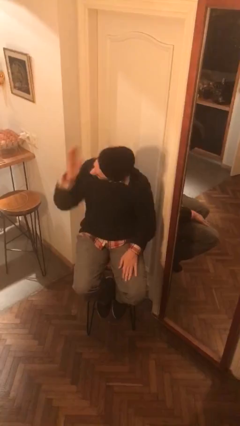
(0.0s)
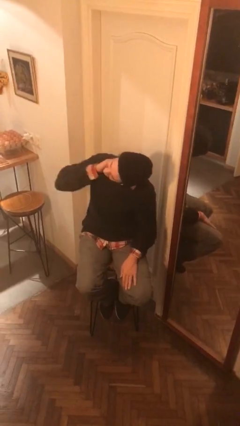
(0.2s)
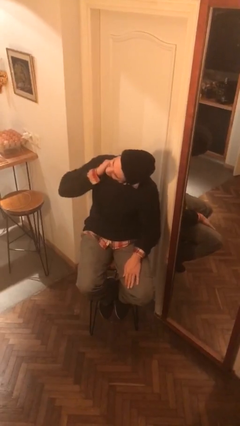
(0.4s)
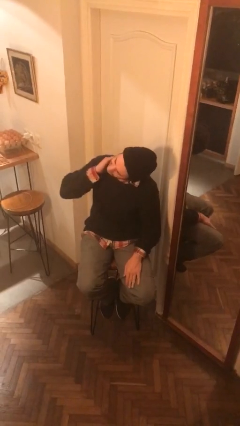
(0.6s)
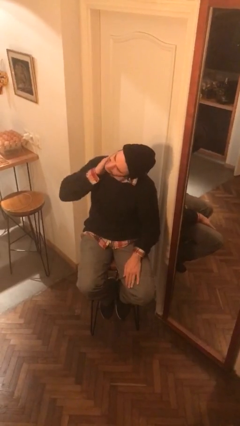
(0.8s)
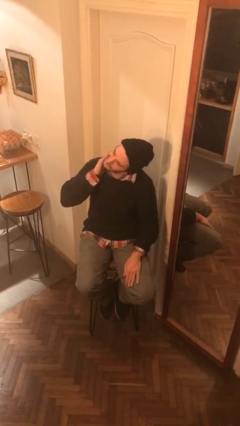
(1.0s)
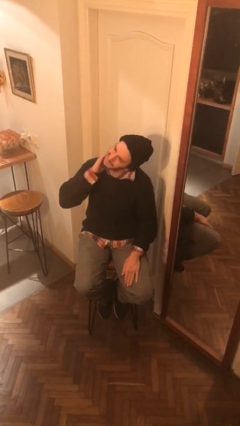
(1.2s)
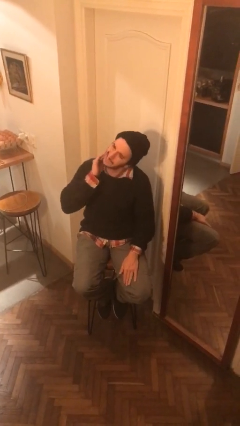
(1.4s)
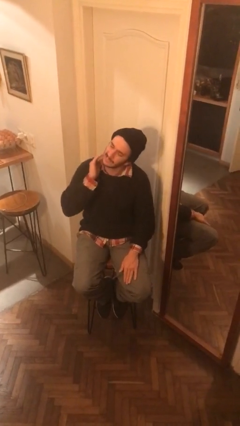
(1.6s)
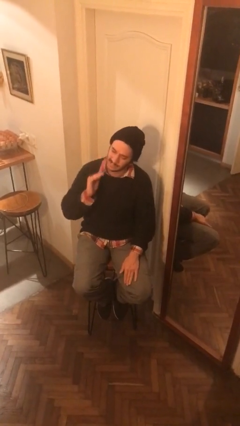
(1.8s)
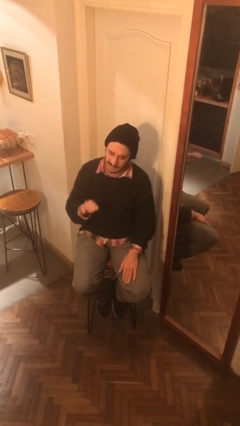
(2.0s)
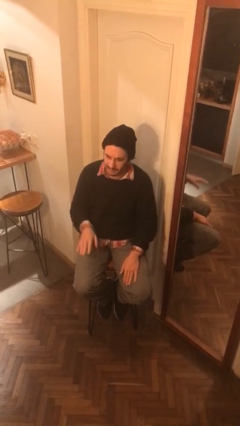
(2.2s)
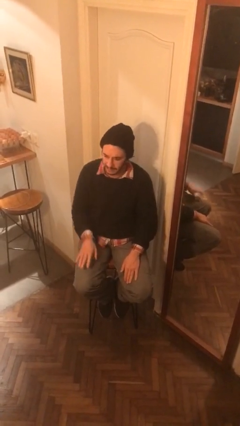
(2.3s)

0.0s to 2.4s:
person swats bug

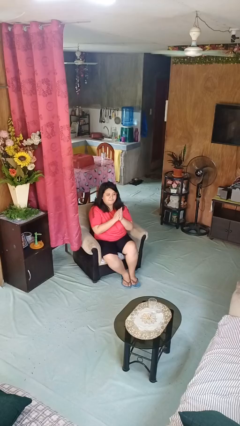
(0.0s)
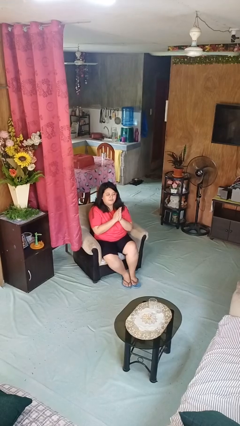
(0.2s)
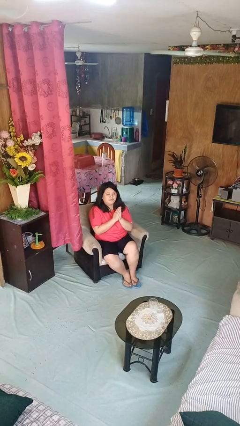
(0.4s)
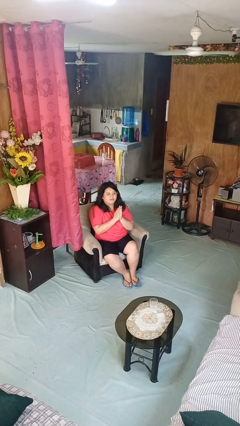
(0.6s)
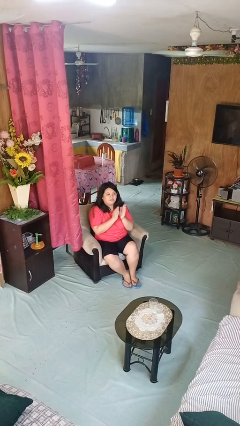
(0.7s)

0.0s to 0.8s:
person claps hands

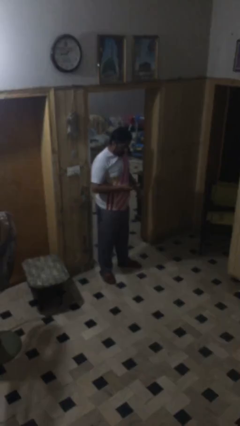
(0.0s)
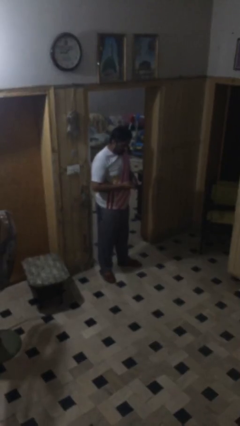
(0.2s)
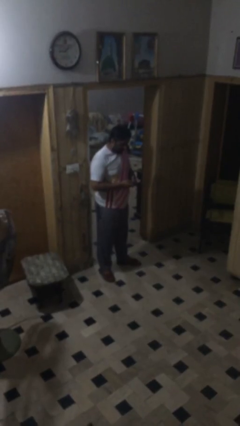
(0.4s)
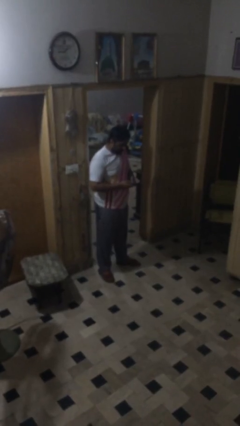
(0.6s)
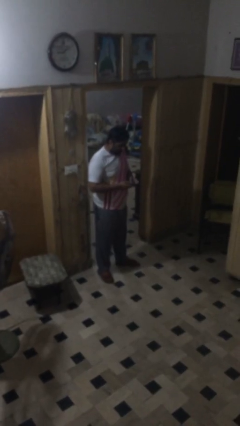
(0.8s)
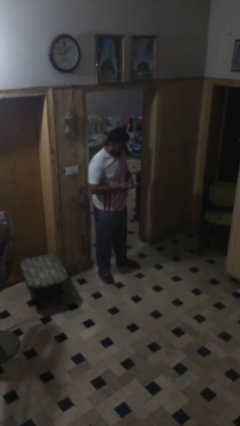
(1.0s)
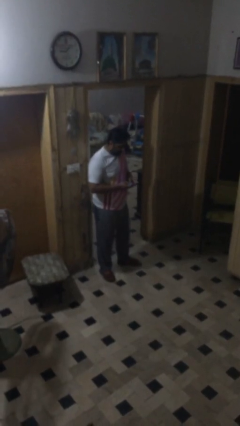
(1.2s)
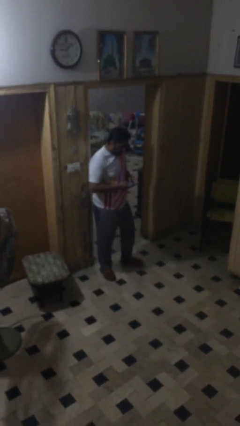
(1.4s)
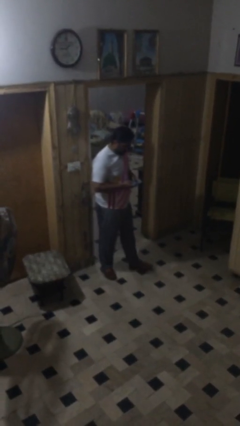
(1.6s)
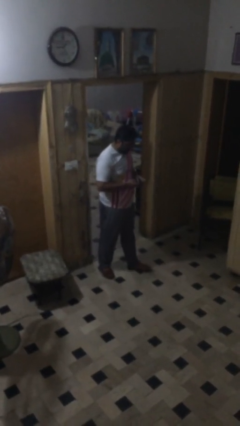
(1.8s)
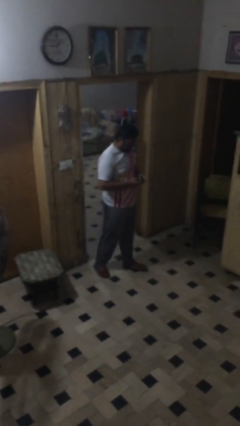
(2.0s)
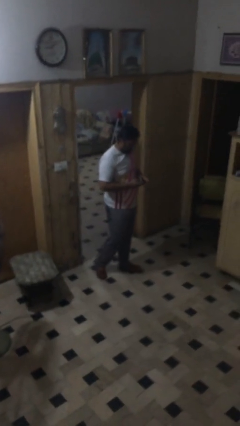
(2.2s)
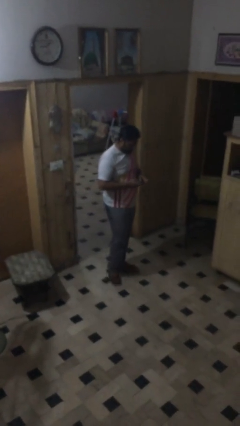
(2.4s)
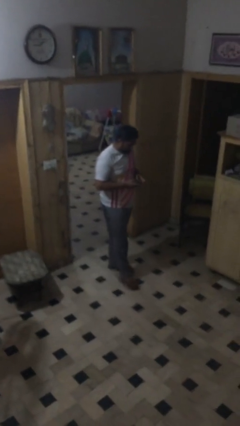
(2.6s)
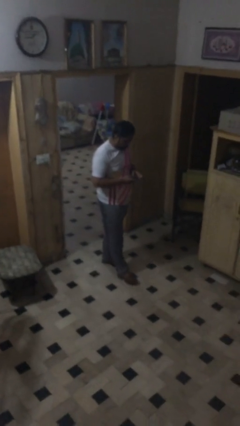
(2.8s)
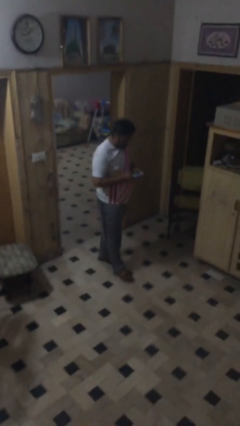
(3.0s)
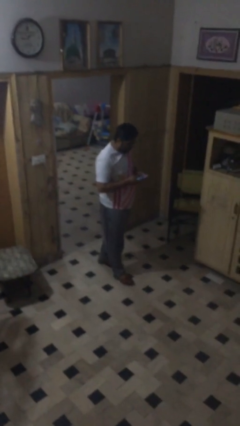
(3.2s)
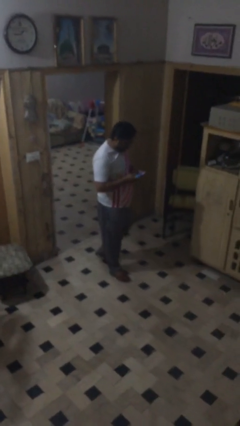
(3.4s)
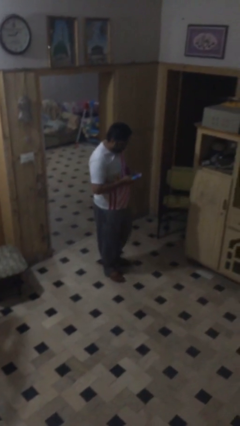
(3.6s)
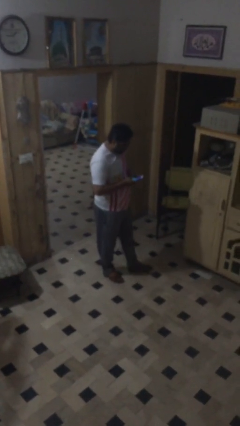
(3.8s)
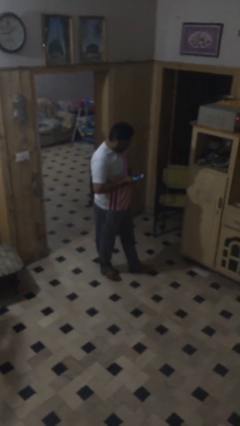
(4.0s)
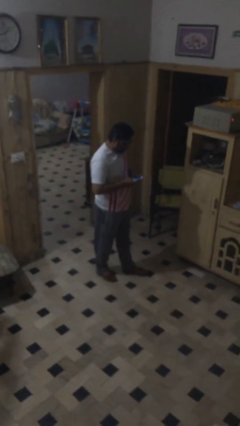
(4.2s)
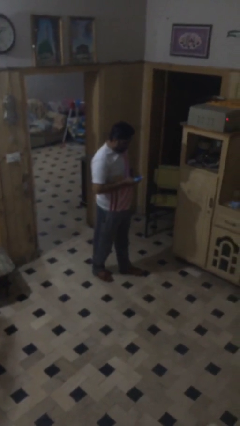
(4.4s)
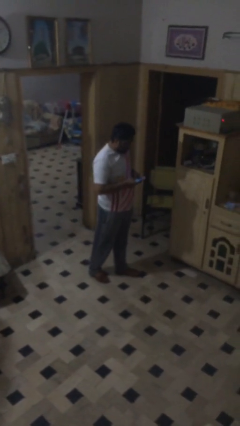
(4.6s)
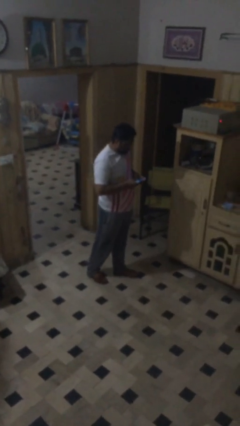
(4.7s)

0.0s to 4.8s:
person texts on phone

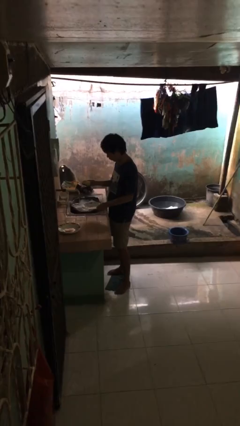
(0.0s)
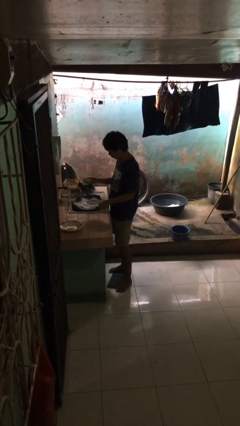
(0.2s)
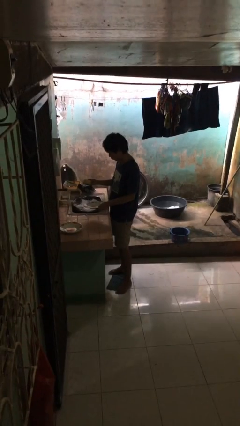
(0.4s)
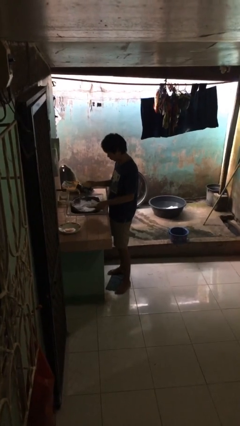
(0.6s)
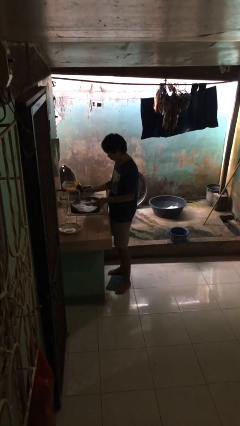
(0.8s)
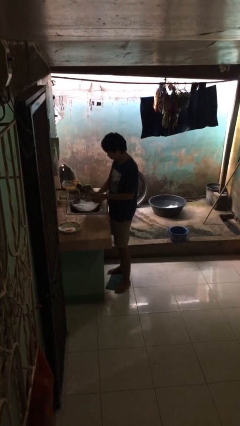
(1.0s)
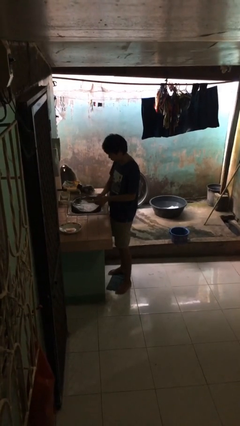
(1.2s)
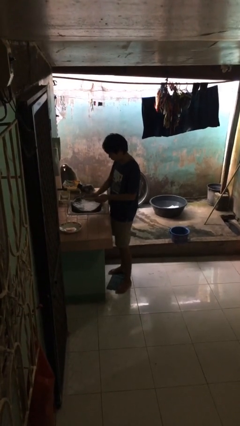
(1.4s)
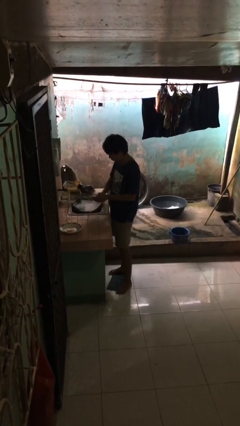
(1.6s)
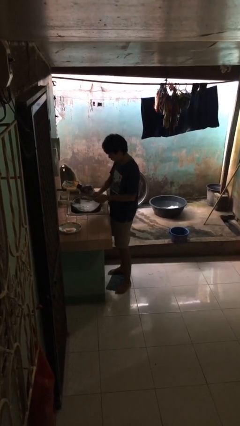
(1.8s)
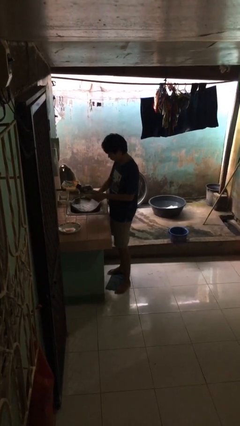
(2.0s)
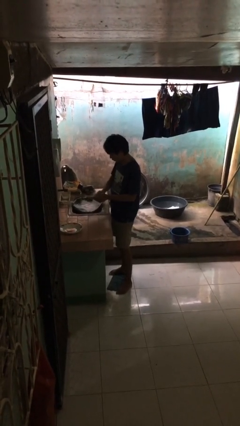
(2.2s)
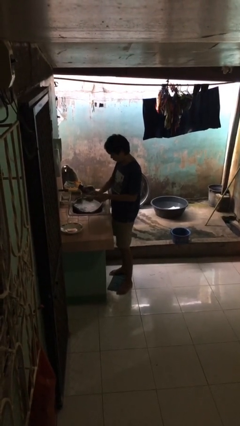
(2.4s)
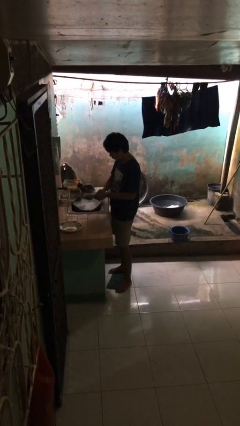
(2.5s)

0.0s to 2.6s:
person washes dish

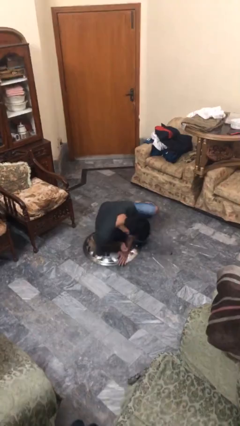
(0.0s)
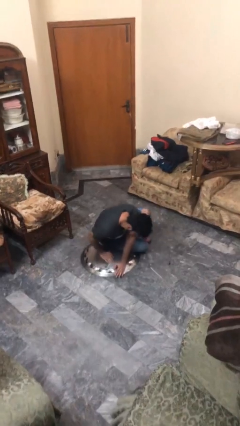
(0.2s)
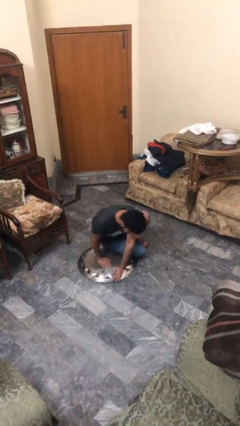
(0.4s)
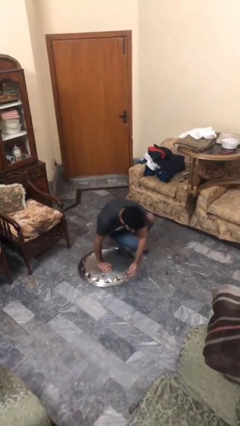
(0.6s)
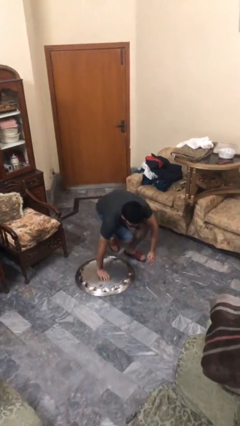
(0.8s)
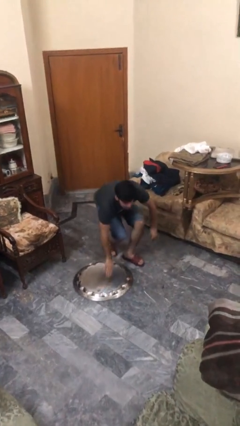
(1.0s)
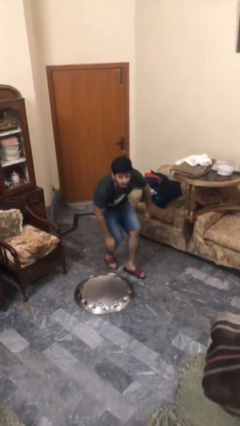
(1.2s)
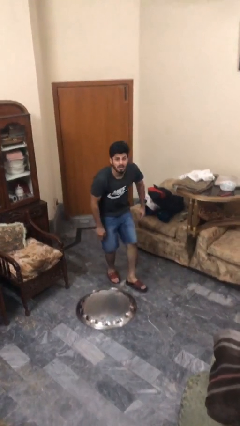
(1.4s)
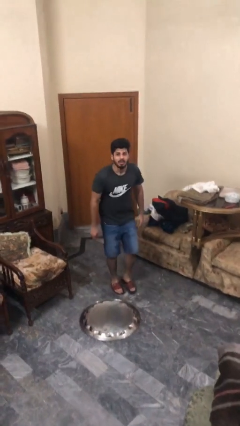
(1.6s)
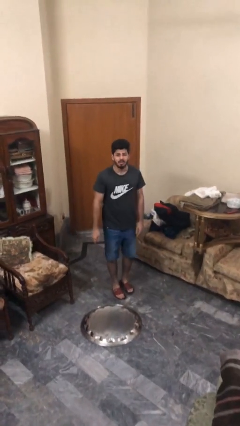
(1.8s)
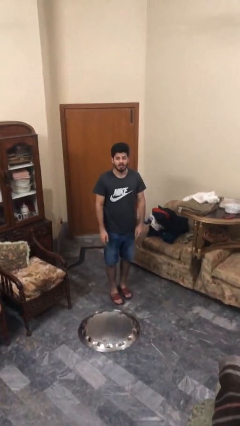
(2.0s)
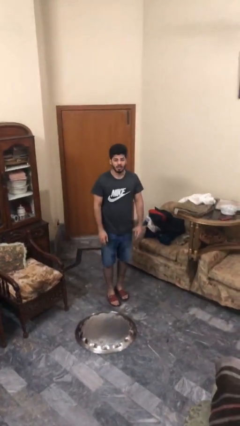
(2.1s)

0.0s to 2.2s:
person stands up from floor

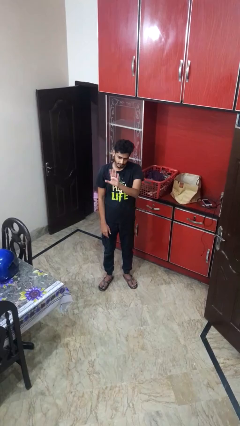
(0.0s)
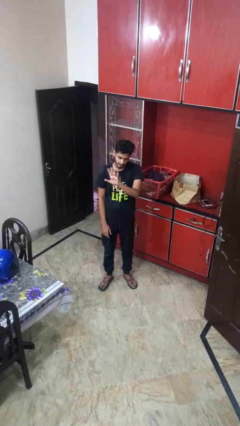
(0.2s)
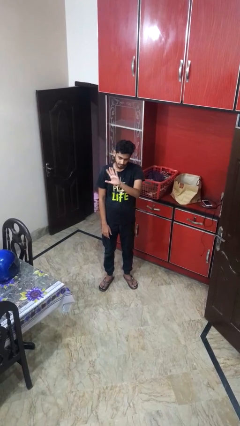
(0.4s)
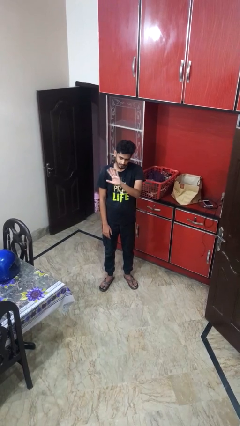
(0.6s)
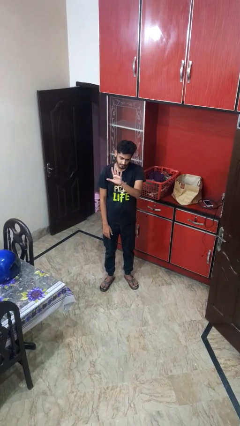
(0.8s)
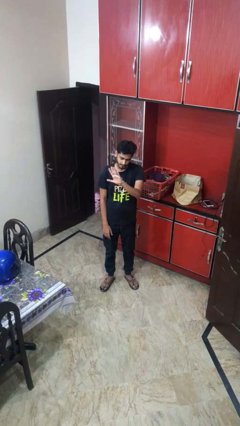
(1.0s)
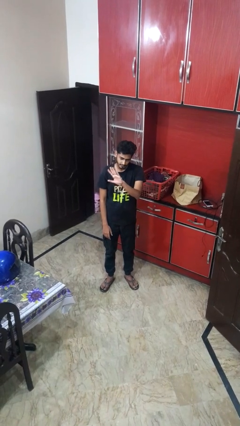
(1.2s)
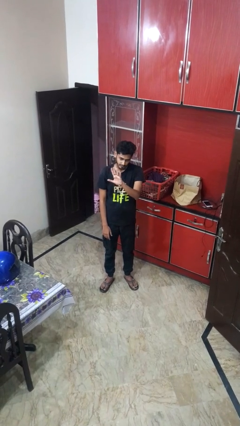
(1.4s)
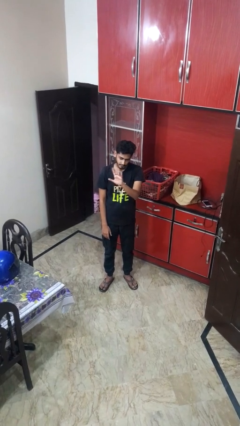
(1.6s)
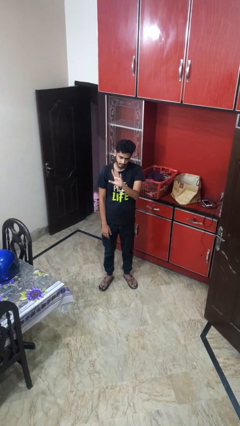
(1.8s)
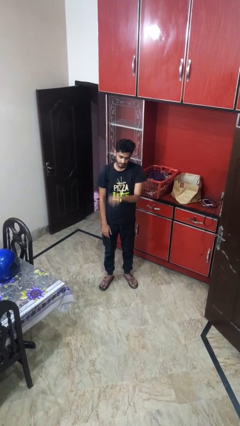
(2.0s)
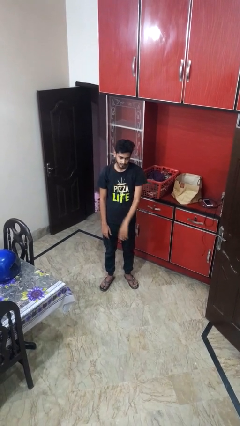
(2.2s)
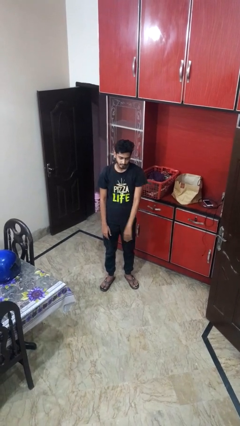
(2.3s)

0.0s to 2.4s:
person waves at person

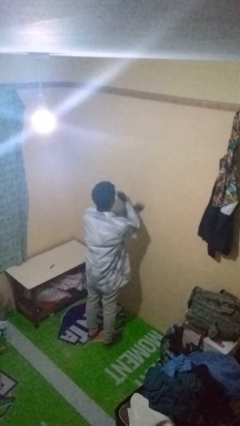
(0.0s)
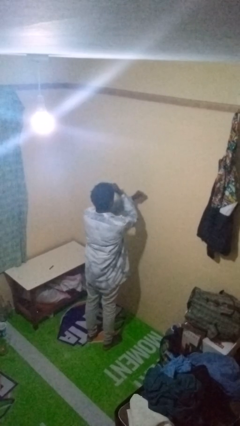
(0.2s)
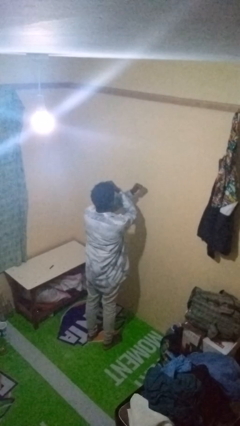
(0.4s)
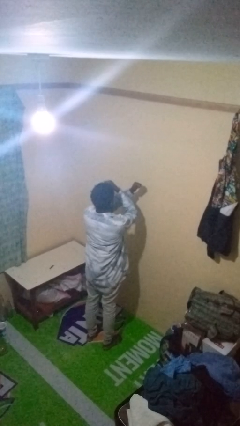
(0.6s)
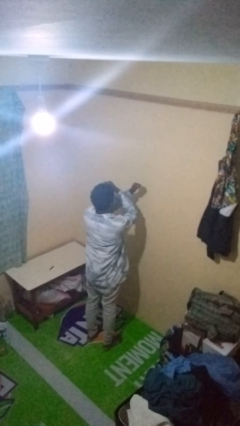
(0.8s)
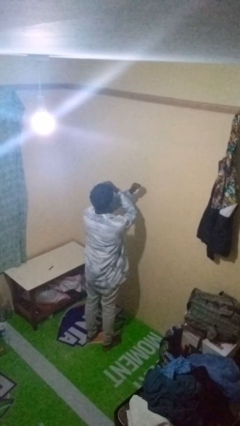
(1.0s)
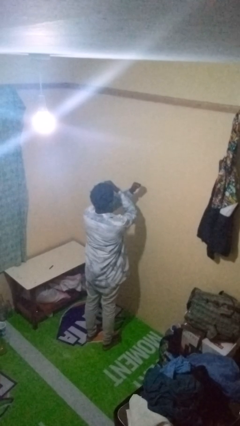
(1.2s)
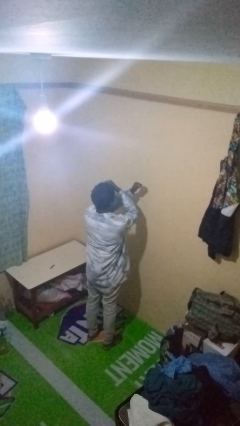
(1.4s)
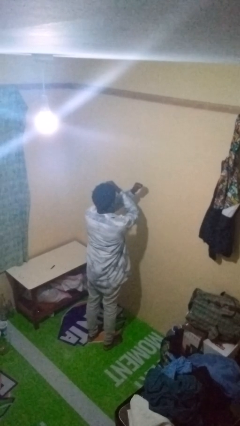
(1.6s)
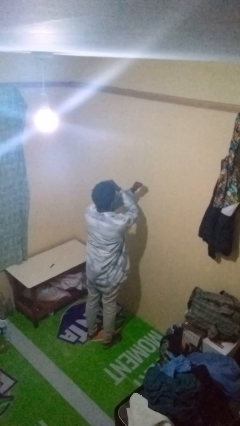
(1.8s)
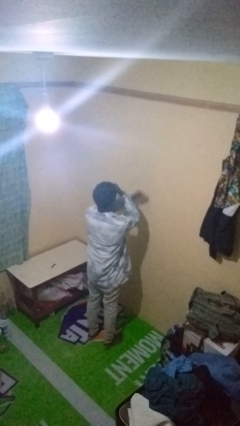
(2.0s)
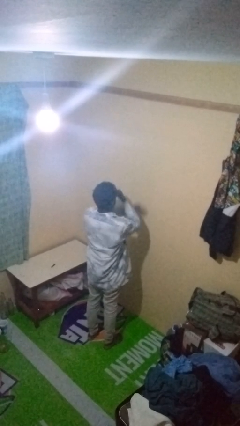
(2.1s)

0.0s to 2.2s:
person gestures arms x
